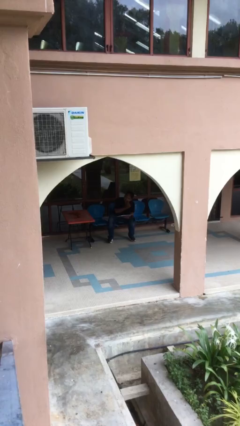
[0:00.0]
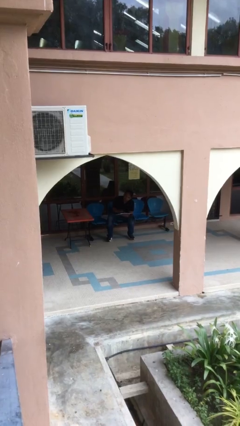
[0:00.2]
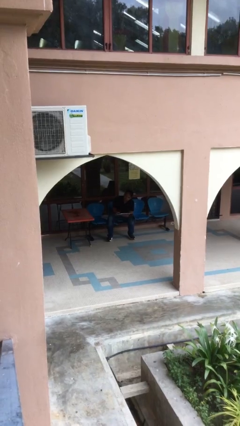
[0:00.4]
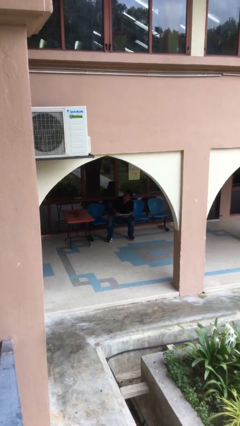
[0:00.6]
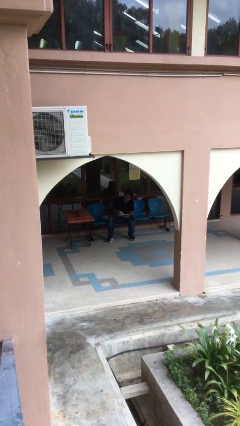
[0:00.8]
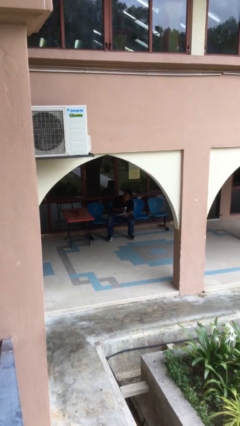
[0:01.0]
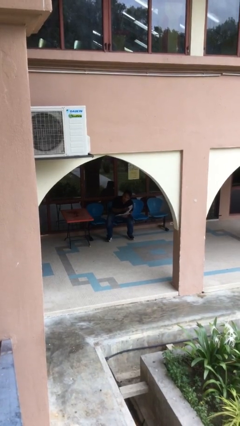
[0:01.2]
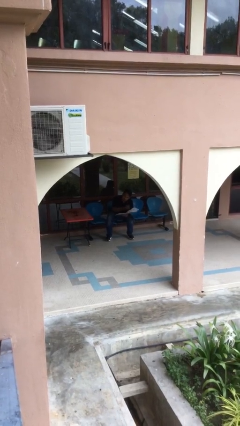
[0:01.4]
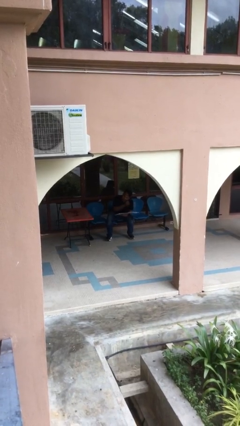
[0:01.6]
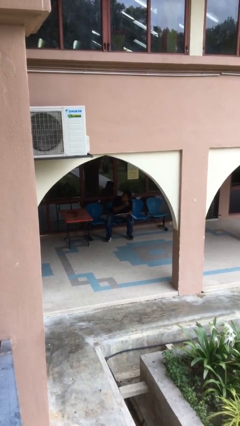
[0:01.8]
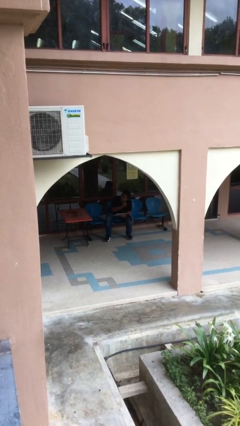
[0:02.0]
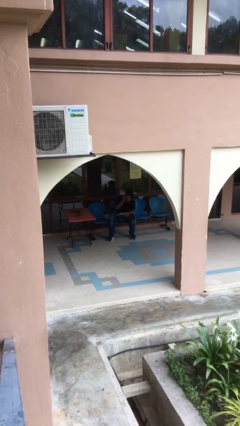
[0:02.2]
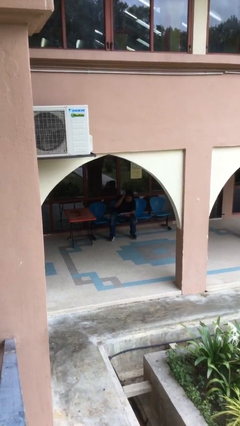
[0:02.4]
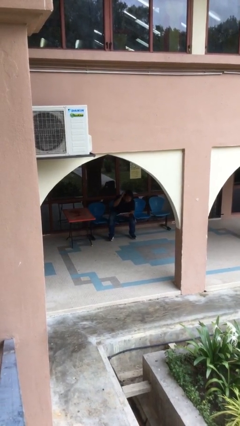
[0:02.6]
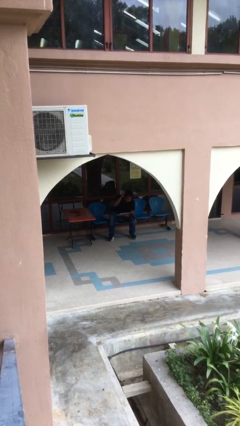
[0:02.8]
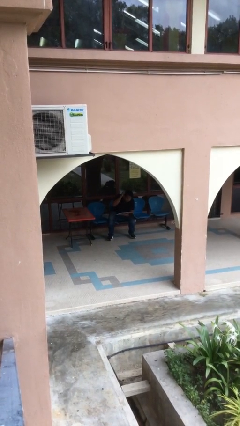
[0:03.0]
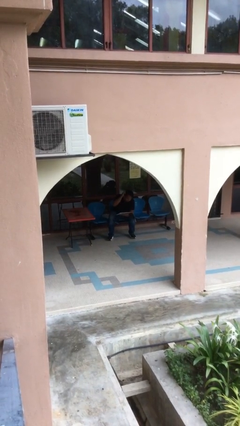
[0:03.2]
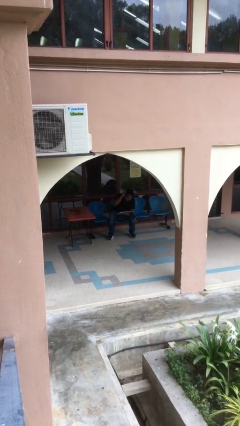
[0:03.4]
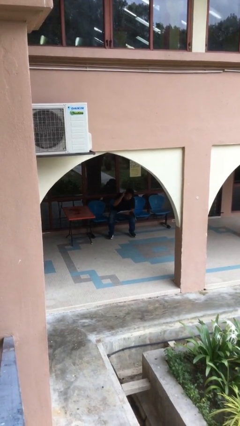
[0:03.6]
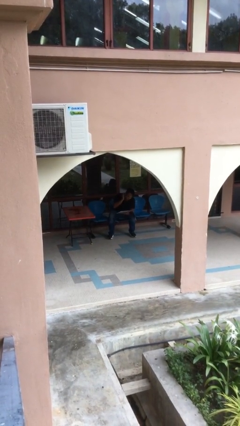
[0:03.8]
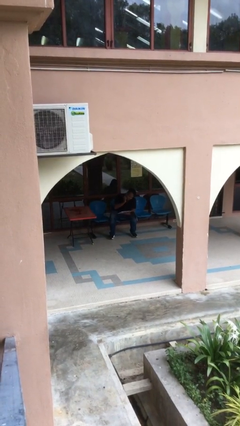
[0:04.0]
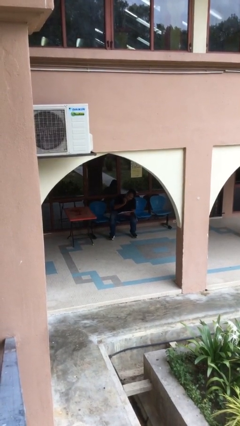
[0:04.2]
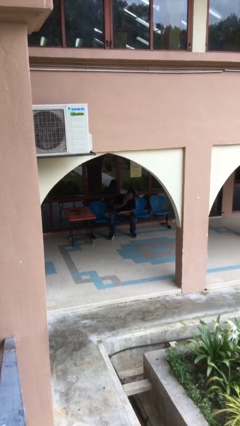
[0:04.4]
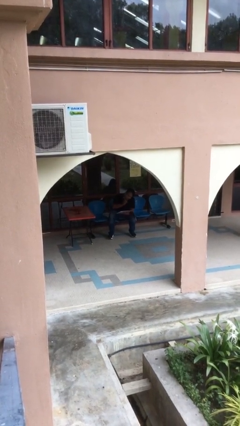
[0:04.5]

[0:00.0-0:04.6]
person reads document

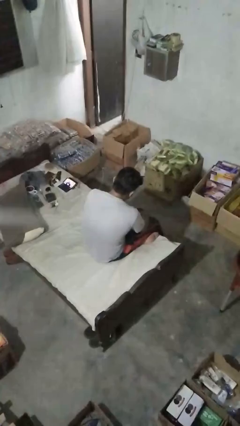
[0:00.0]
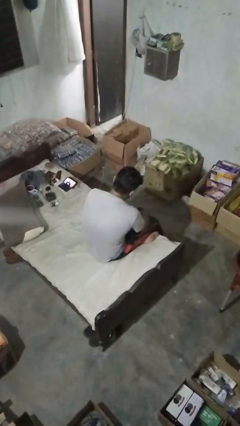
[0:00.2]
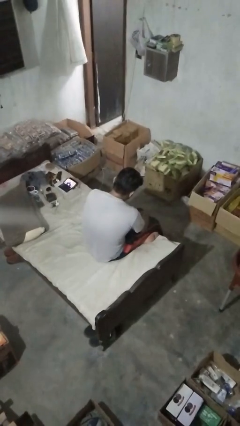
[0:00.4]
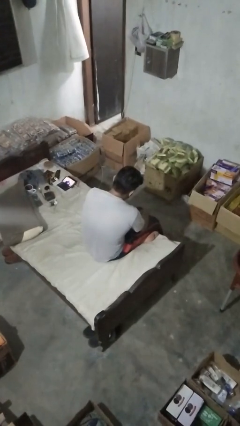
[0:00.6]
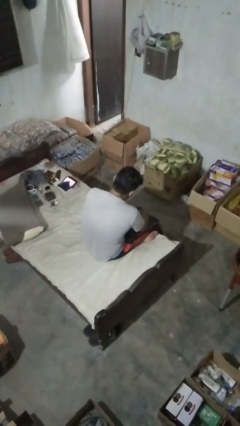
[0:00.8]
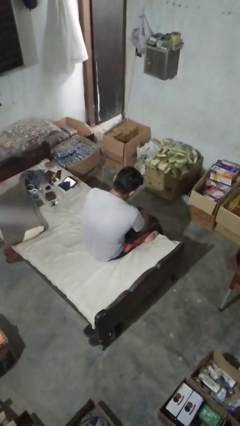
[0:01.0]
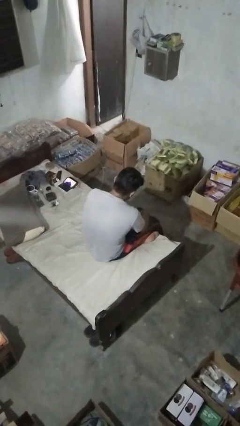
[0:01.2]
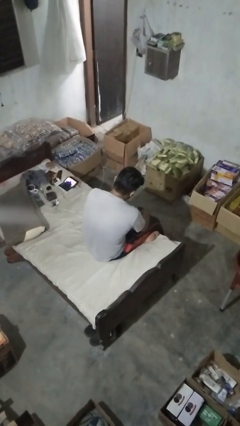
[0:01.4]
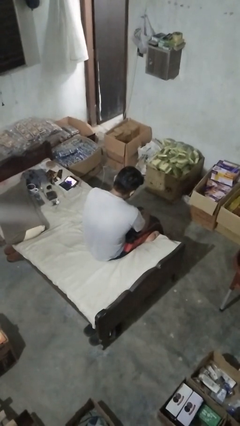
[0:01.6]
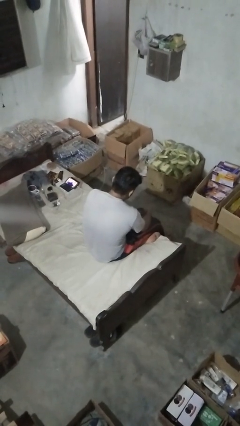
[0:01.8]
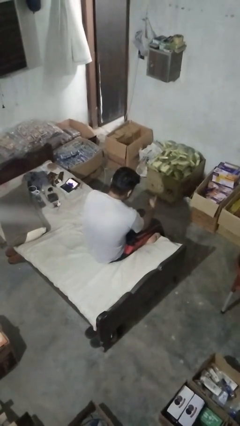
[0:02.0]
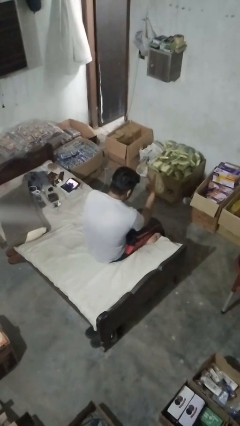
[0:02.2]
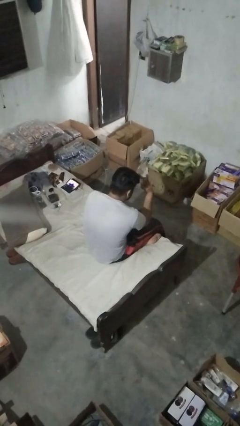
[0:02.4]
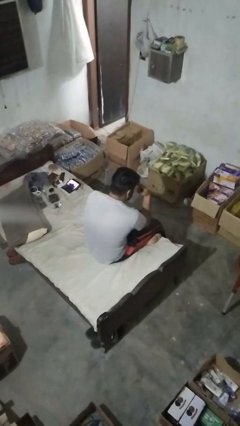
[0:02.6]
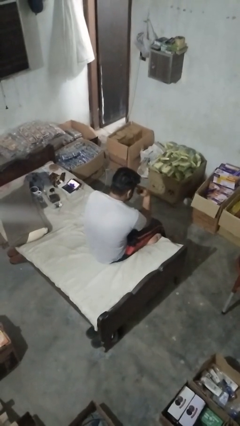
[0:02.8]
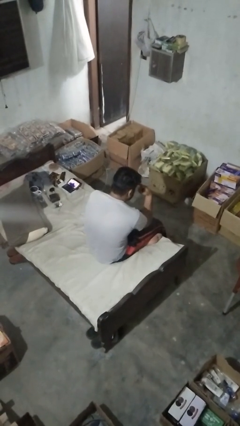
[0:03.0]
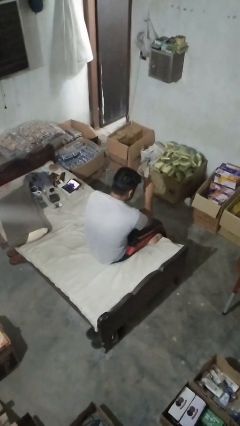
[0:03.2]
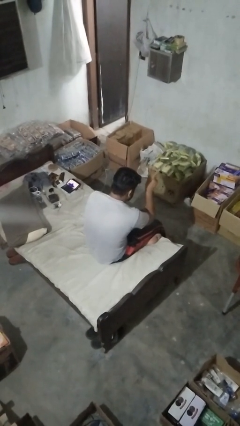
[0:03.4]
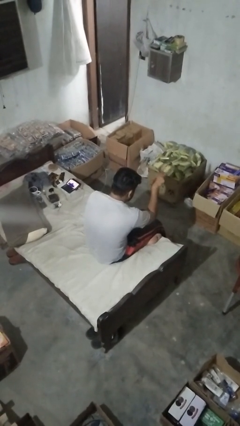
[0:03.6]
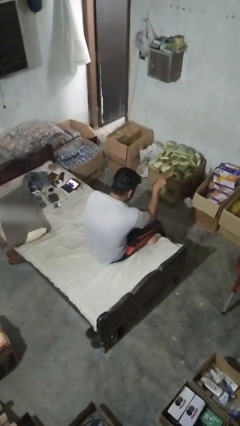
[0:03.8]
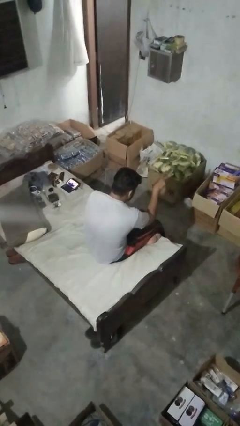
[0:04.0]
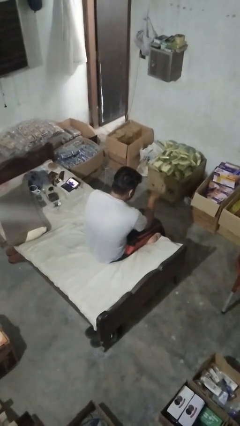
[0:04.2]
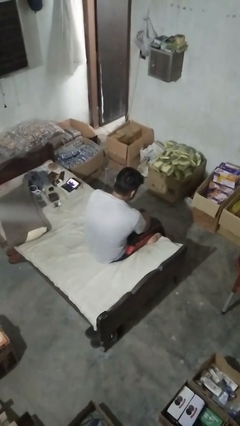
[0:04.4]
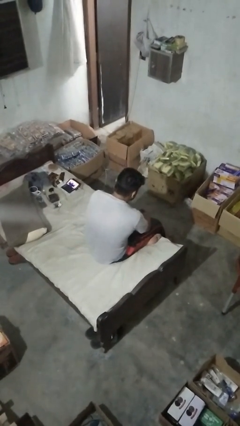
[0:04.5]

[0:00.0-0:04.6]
person gestures watch closely

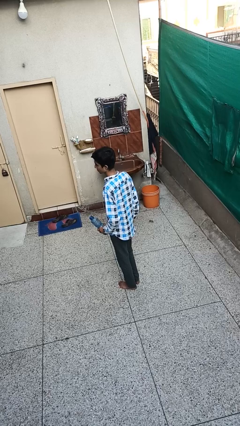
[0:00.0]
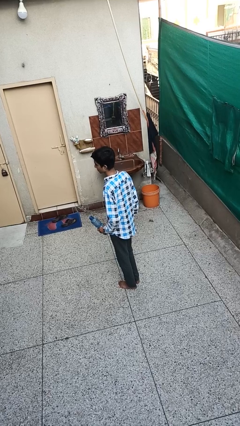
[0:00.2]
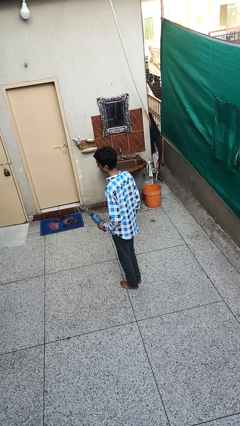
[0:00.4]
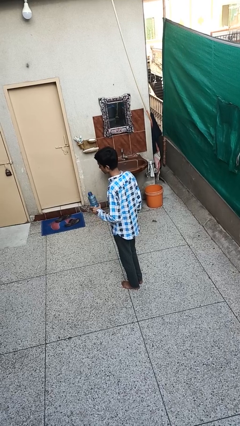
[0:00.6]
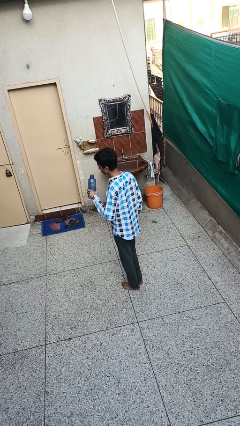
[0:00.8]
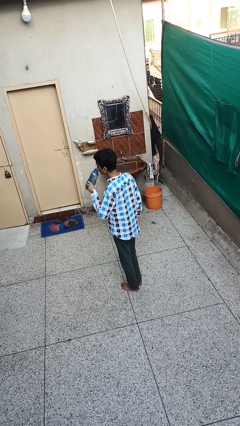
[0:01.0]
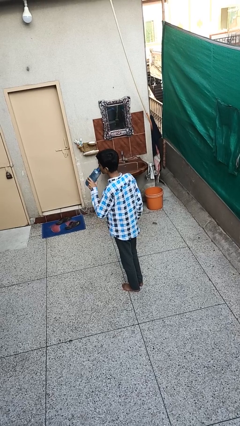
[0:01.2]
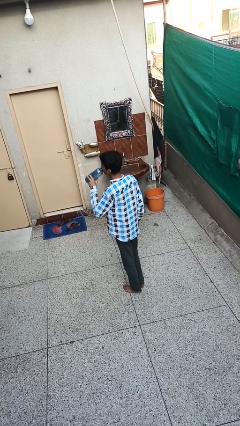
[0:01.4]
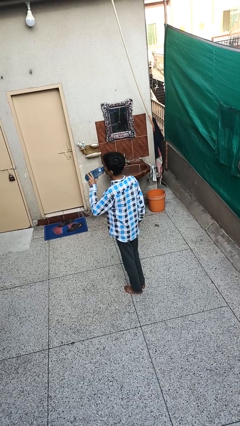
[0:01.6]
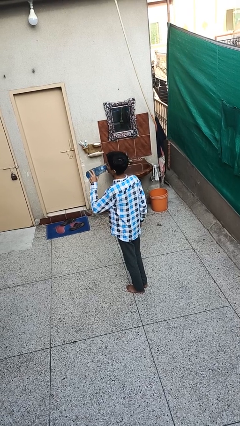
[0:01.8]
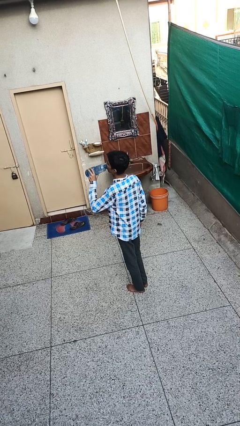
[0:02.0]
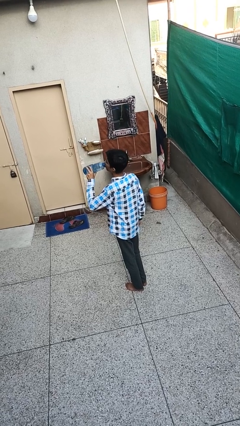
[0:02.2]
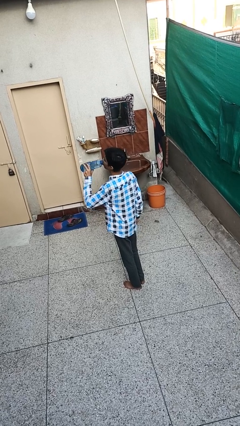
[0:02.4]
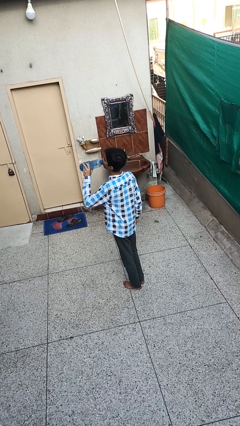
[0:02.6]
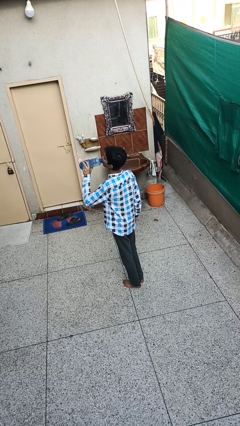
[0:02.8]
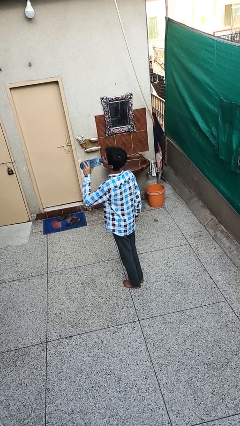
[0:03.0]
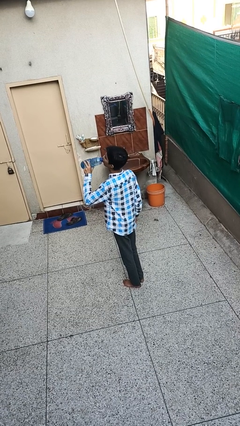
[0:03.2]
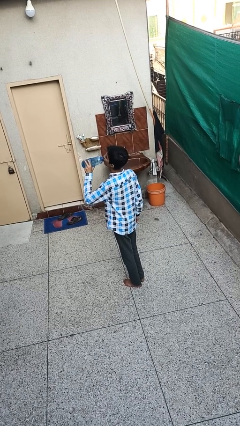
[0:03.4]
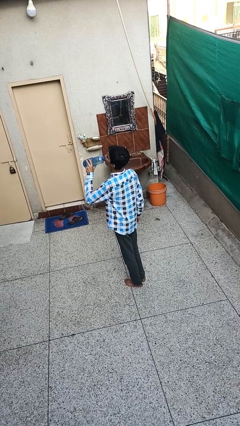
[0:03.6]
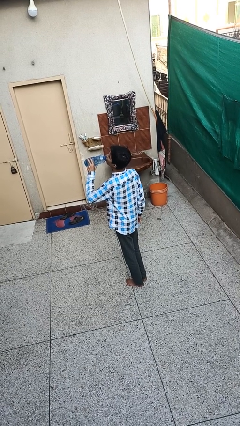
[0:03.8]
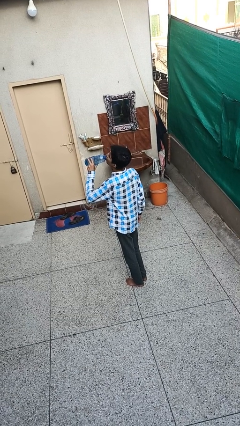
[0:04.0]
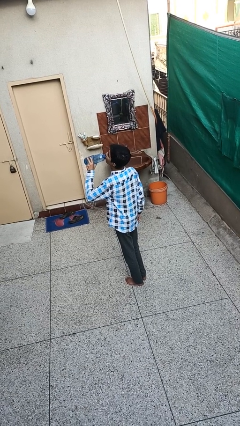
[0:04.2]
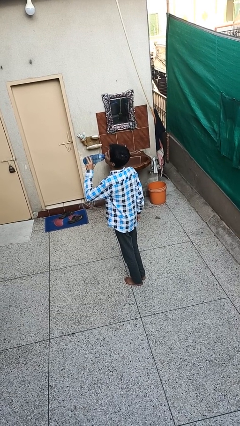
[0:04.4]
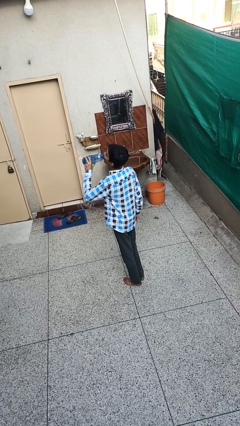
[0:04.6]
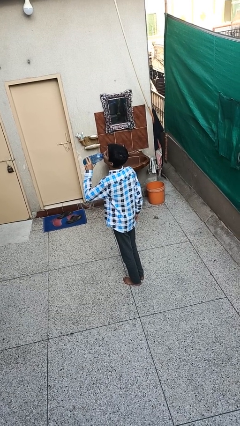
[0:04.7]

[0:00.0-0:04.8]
person drinks from bottle

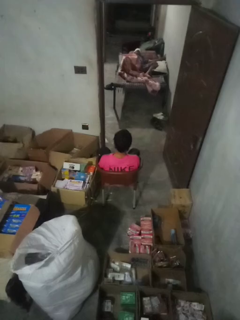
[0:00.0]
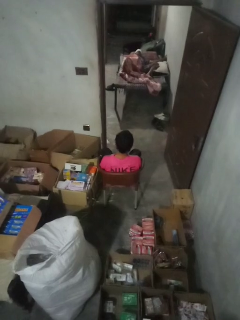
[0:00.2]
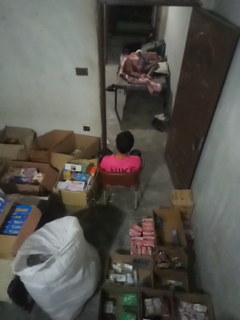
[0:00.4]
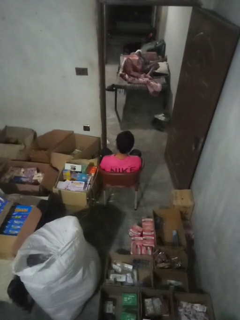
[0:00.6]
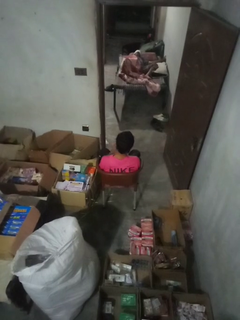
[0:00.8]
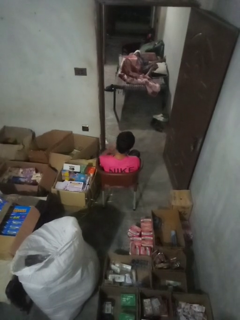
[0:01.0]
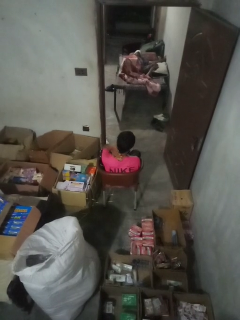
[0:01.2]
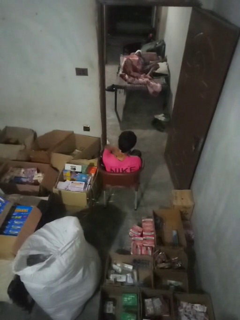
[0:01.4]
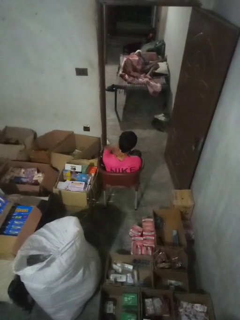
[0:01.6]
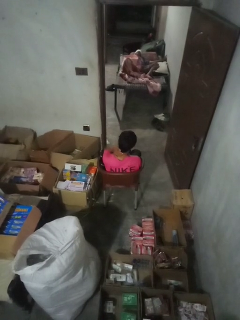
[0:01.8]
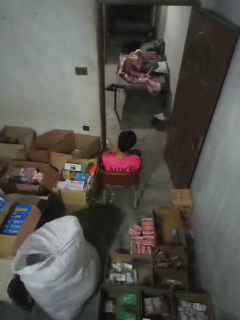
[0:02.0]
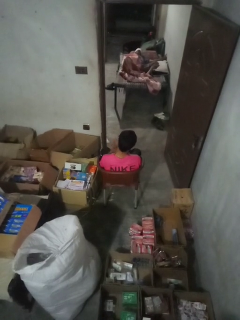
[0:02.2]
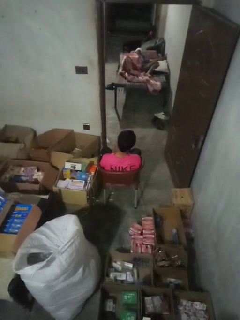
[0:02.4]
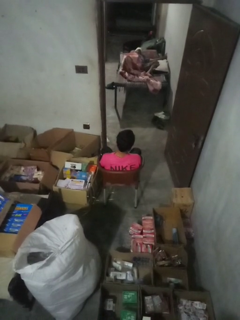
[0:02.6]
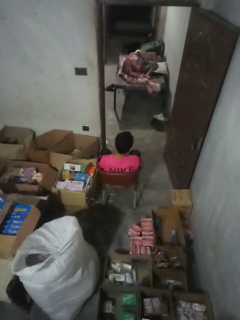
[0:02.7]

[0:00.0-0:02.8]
person rubs neck

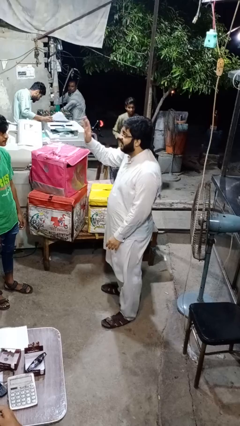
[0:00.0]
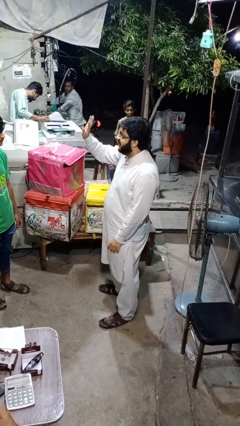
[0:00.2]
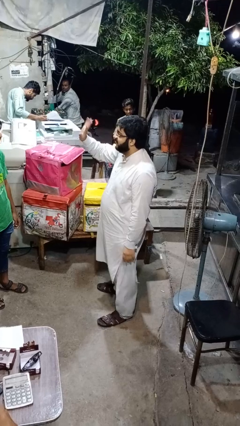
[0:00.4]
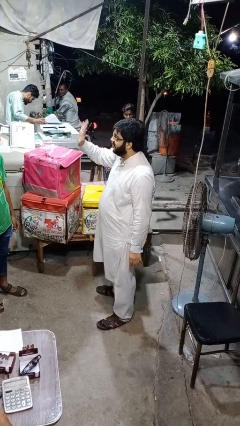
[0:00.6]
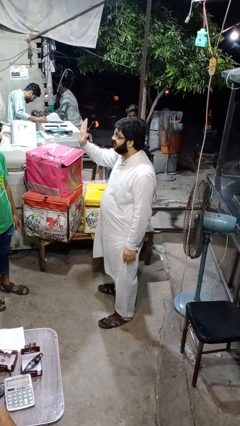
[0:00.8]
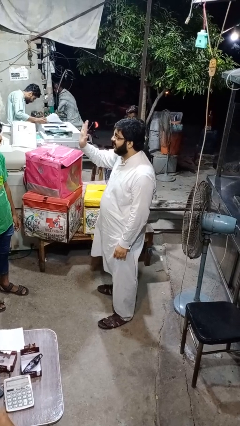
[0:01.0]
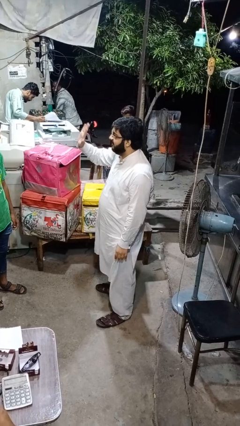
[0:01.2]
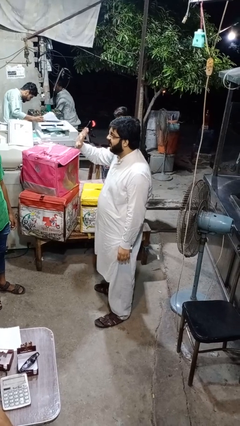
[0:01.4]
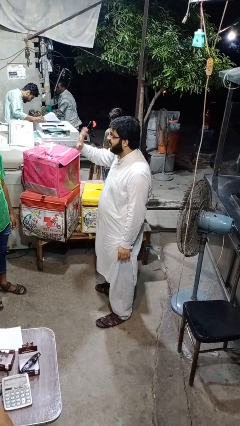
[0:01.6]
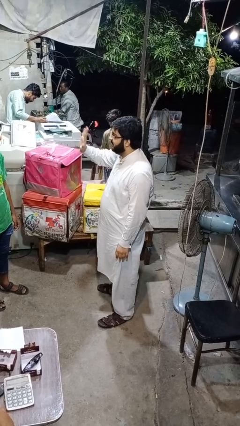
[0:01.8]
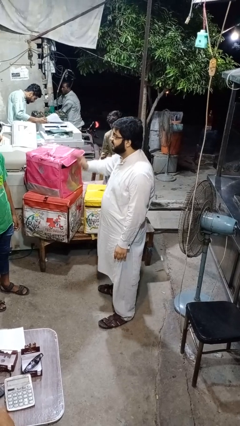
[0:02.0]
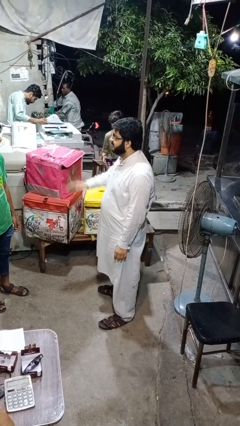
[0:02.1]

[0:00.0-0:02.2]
person waves at person
